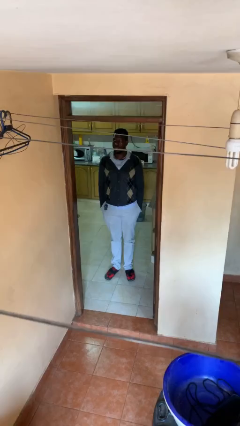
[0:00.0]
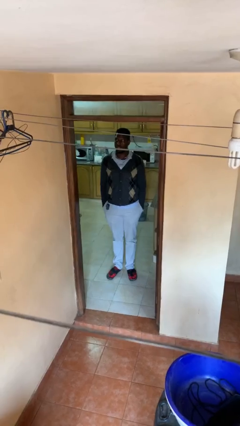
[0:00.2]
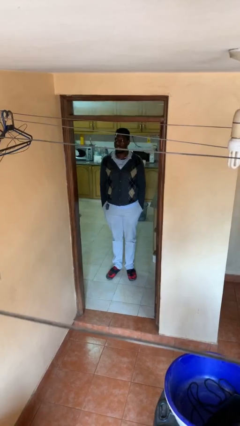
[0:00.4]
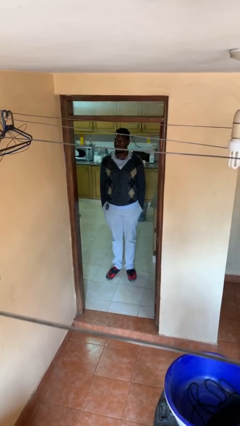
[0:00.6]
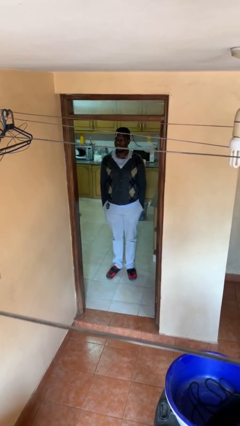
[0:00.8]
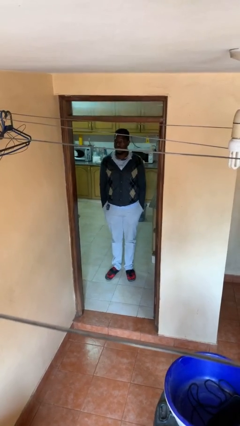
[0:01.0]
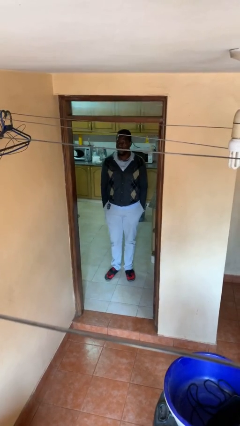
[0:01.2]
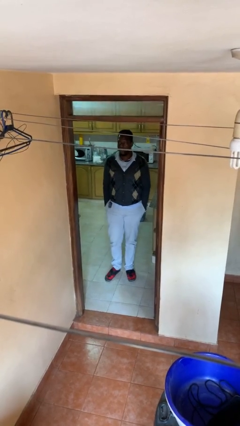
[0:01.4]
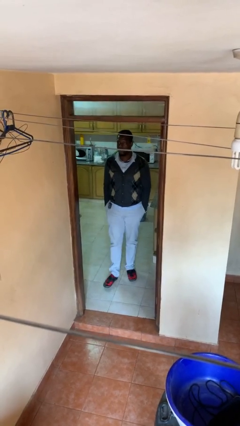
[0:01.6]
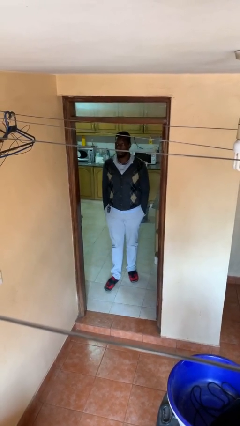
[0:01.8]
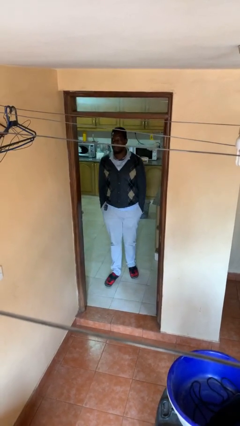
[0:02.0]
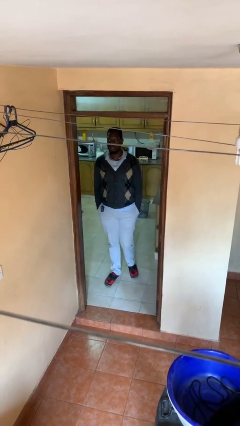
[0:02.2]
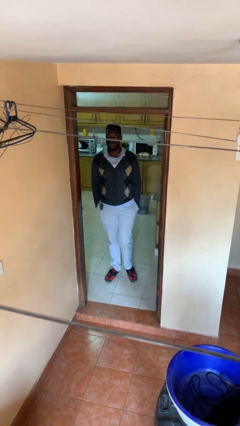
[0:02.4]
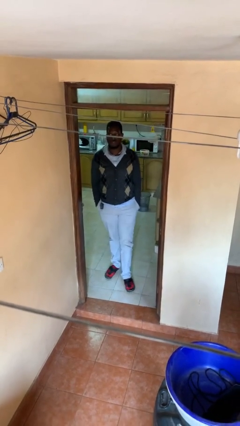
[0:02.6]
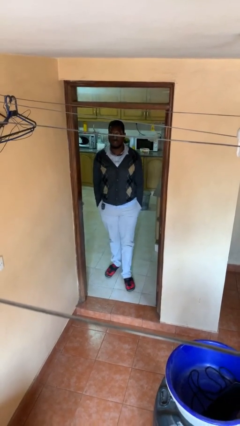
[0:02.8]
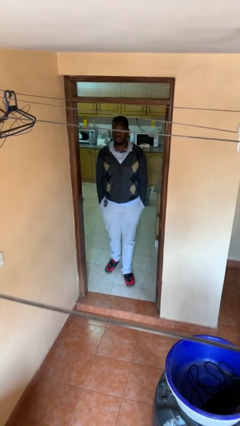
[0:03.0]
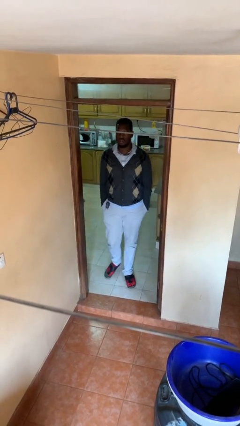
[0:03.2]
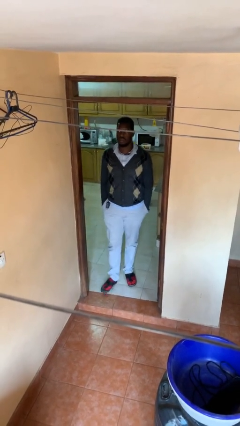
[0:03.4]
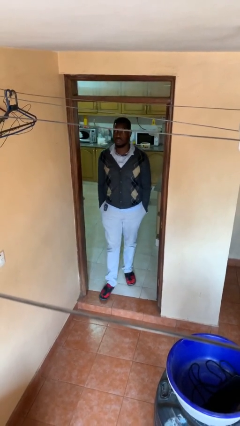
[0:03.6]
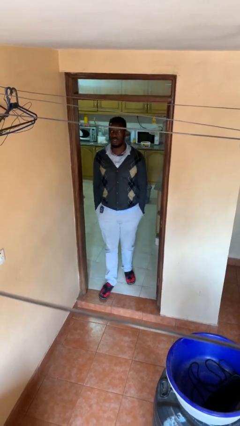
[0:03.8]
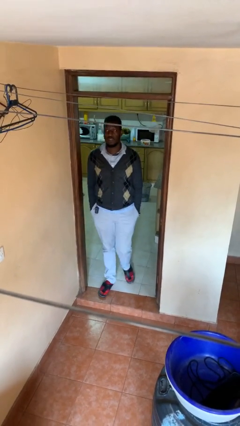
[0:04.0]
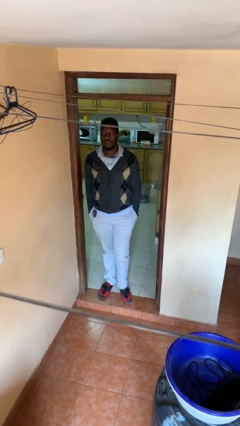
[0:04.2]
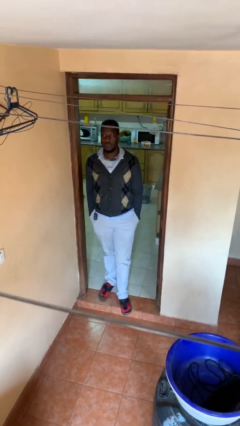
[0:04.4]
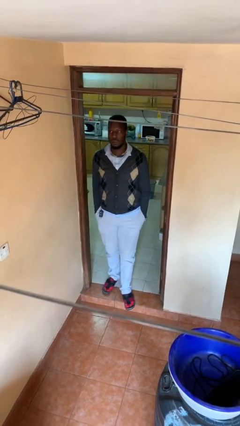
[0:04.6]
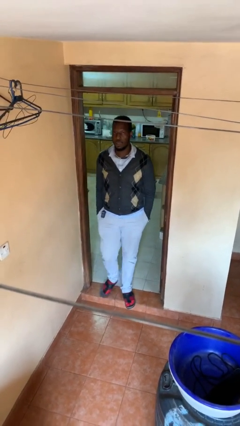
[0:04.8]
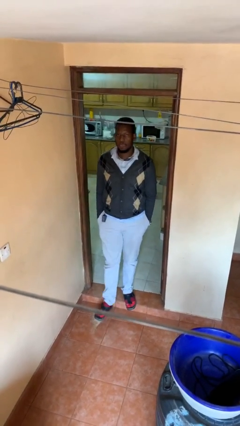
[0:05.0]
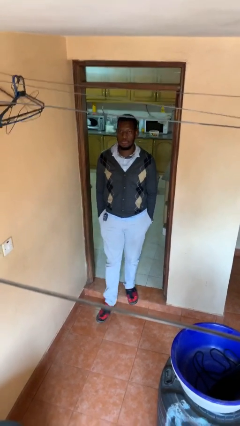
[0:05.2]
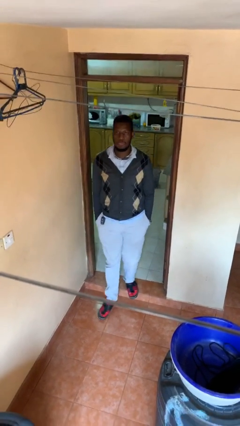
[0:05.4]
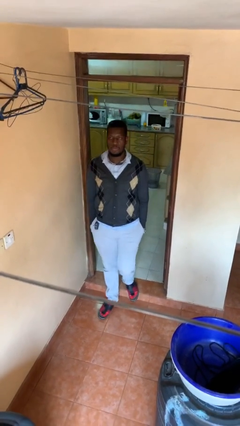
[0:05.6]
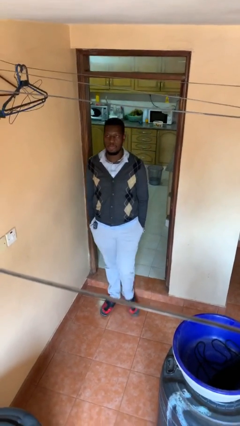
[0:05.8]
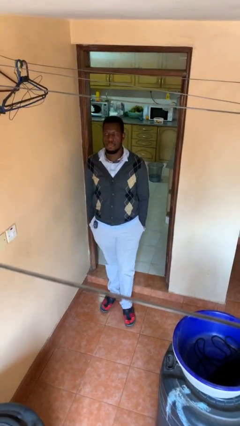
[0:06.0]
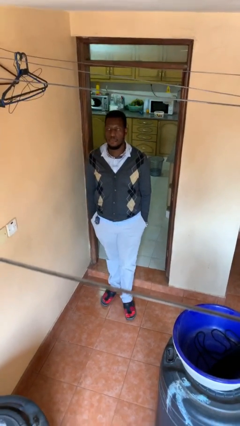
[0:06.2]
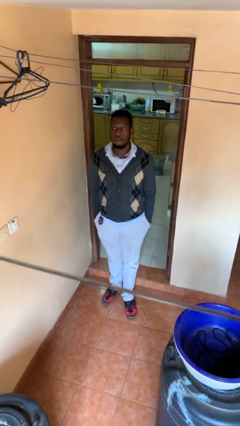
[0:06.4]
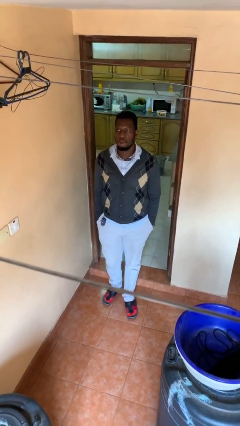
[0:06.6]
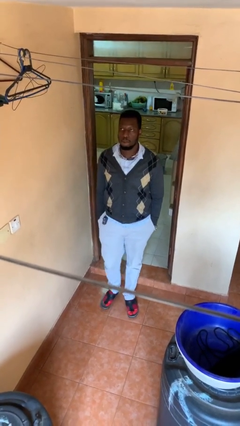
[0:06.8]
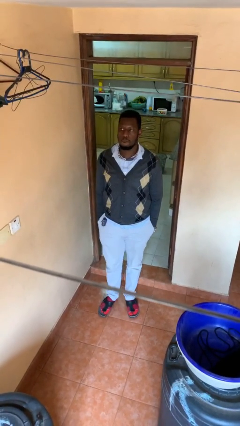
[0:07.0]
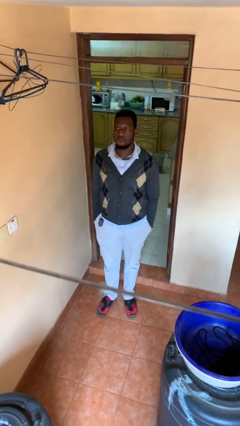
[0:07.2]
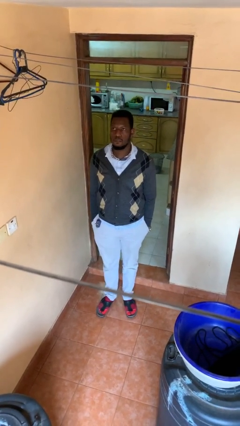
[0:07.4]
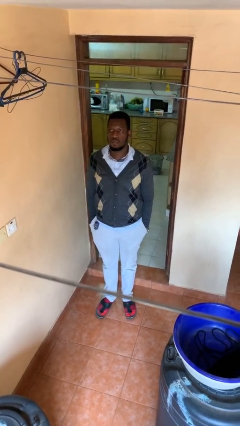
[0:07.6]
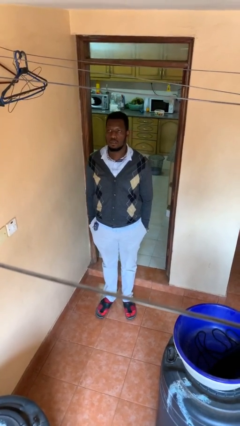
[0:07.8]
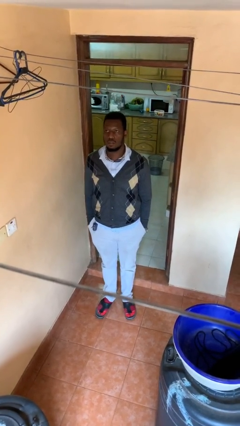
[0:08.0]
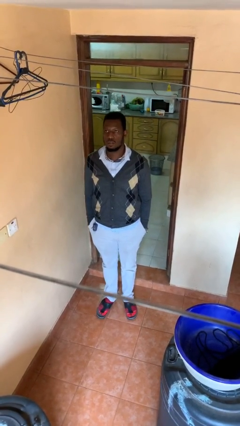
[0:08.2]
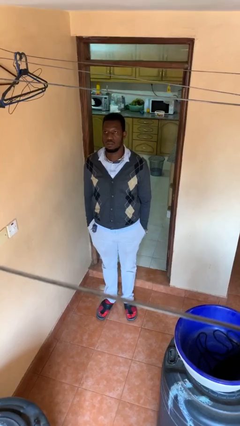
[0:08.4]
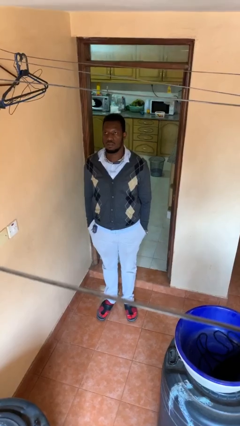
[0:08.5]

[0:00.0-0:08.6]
person enters scene through structure

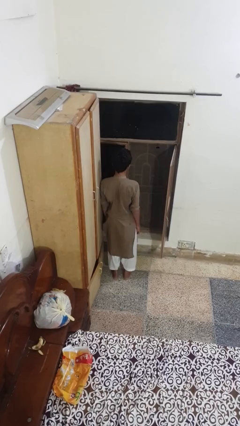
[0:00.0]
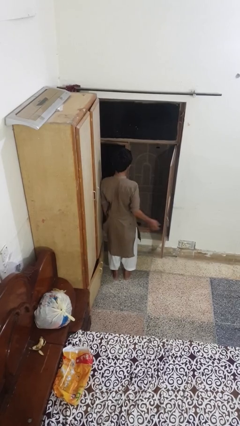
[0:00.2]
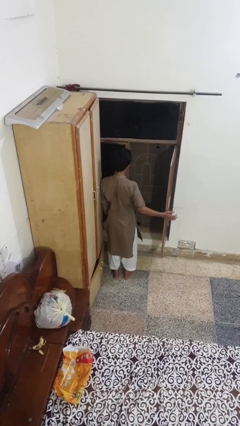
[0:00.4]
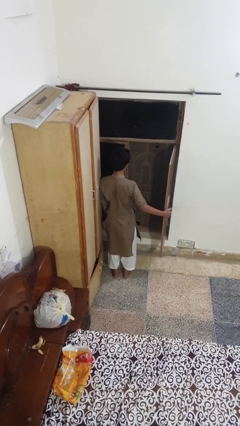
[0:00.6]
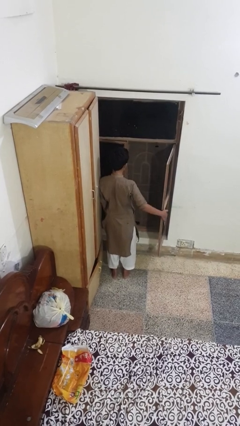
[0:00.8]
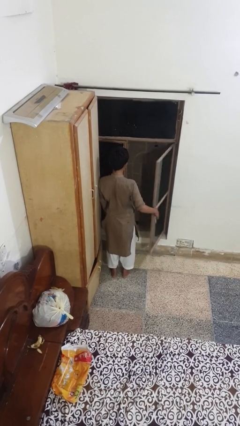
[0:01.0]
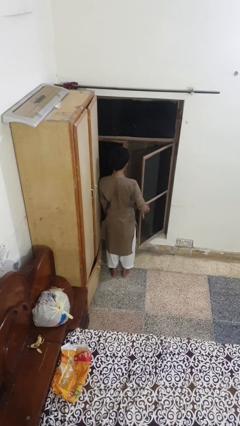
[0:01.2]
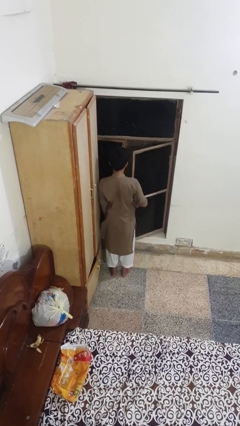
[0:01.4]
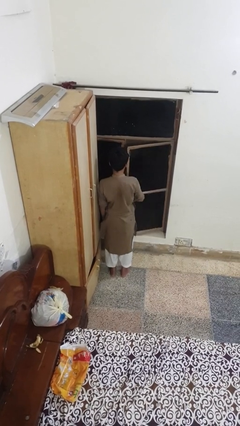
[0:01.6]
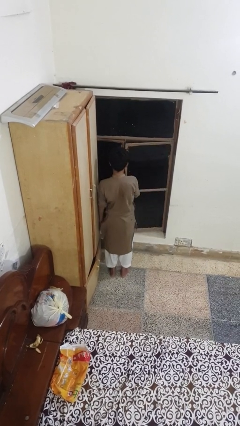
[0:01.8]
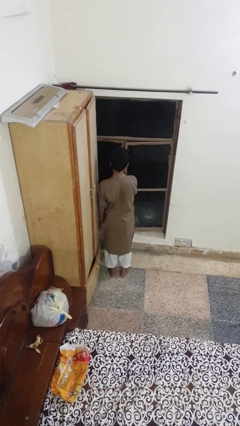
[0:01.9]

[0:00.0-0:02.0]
person closes home window

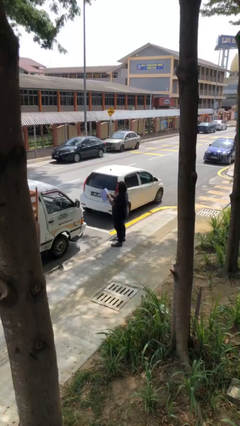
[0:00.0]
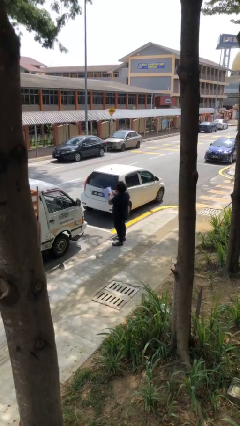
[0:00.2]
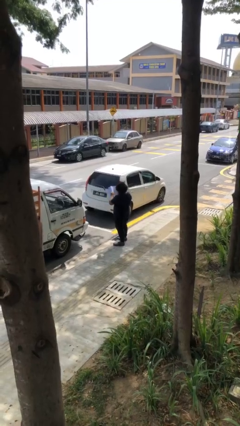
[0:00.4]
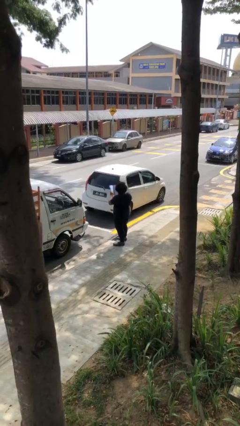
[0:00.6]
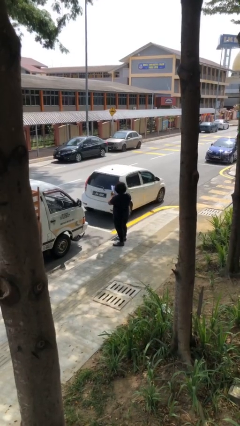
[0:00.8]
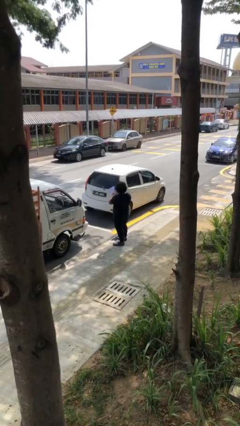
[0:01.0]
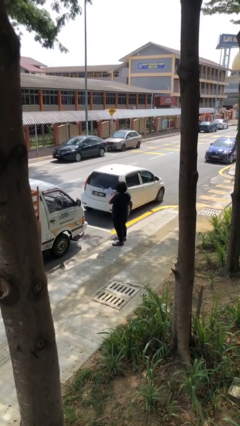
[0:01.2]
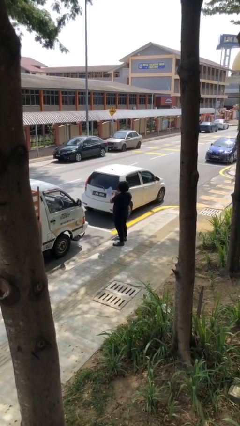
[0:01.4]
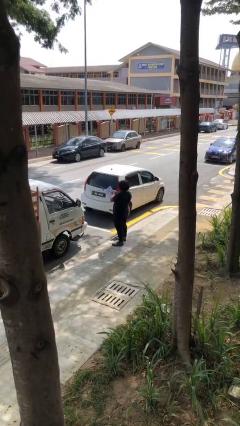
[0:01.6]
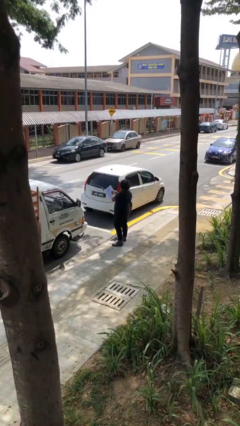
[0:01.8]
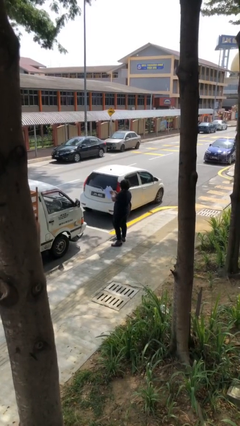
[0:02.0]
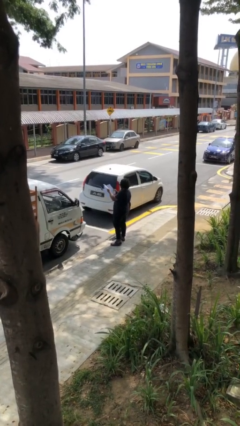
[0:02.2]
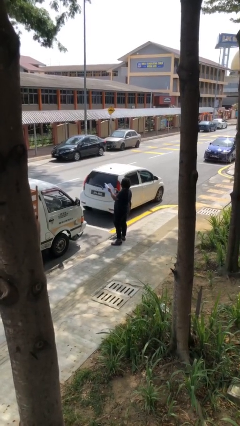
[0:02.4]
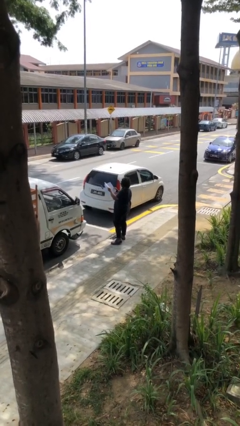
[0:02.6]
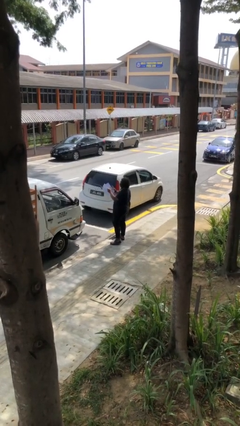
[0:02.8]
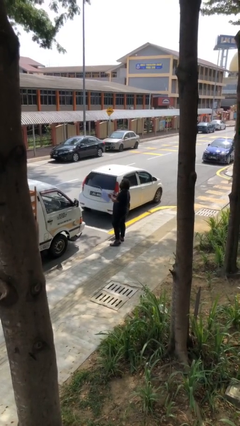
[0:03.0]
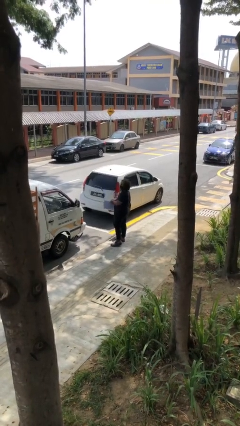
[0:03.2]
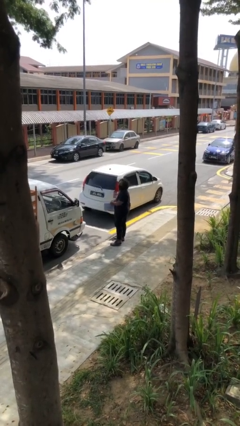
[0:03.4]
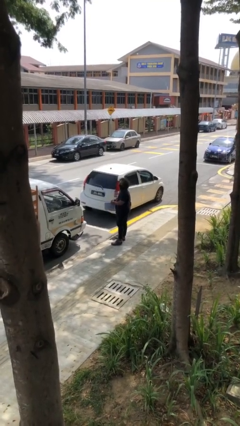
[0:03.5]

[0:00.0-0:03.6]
person reads document

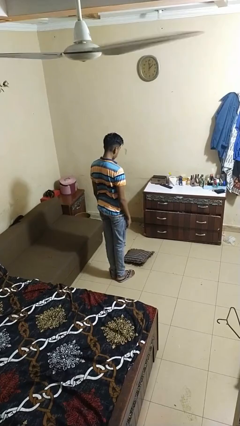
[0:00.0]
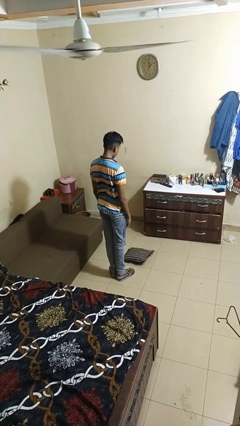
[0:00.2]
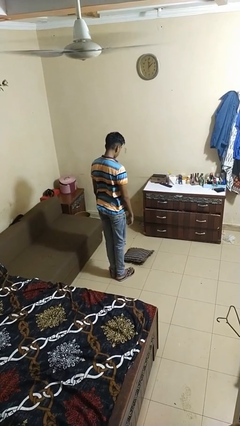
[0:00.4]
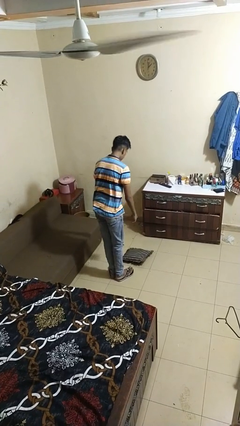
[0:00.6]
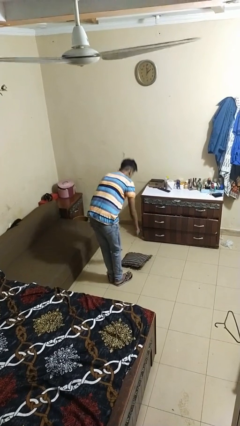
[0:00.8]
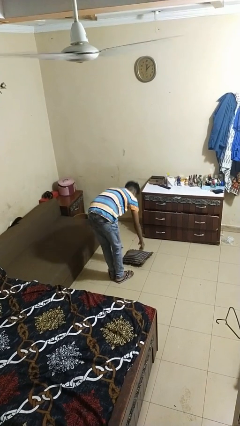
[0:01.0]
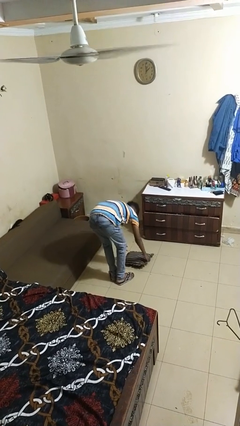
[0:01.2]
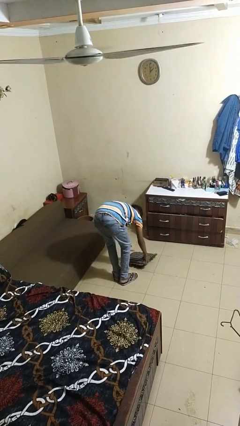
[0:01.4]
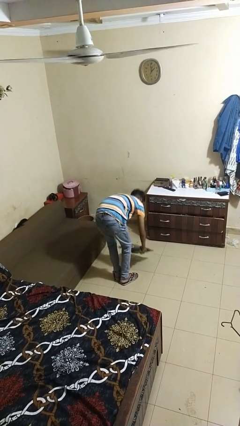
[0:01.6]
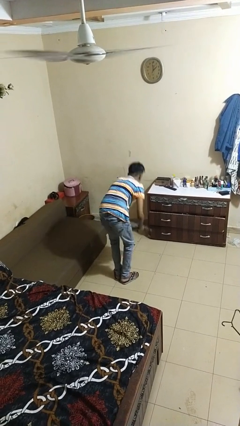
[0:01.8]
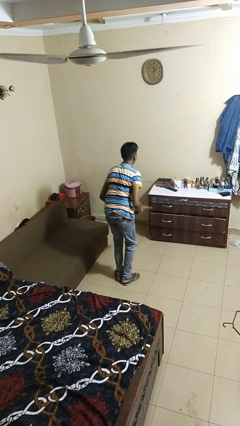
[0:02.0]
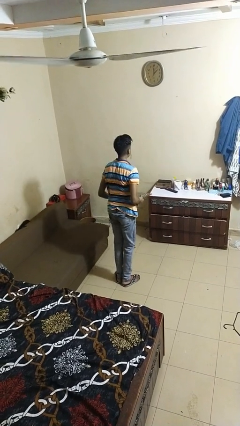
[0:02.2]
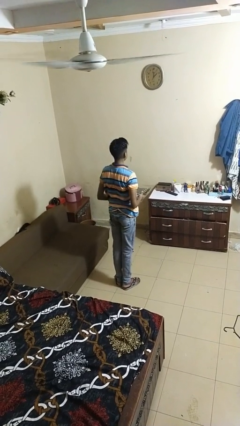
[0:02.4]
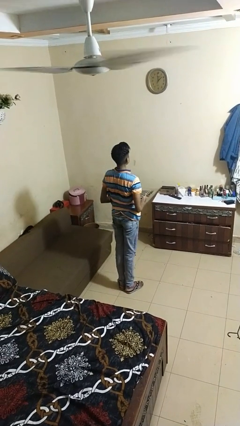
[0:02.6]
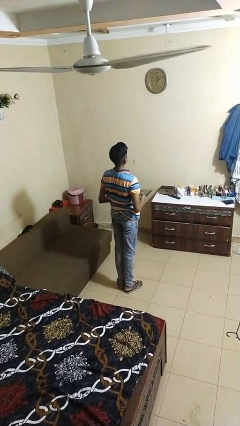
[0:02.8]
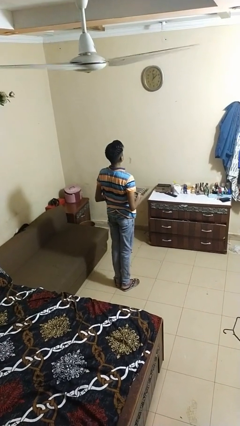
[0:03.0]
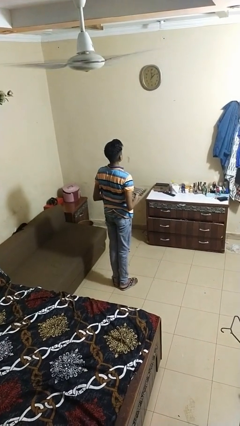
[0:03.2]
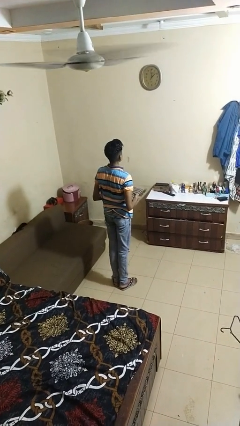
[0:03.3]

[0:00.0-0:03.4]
person picks up object from floor
